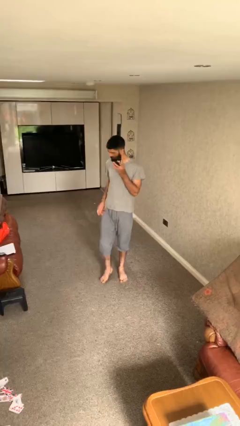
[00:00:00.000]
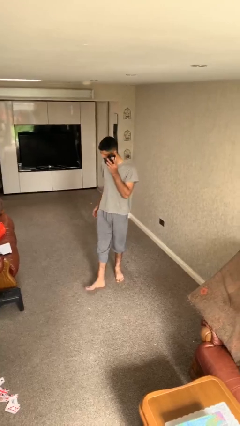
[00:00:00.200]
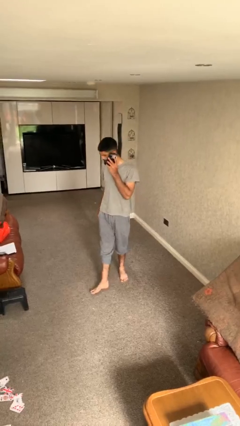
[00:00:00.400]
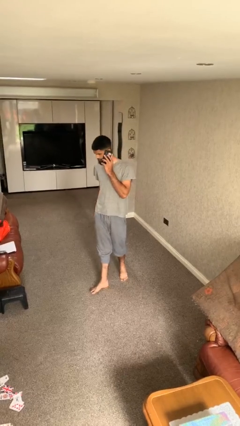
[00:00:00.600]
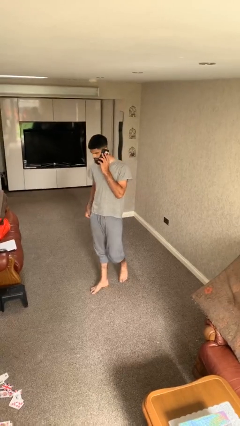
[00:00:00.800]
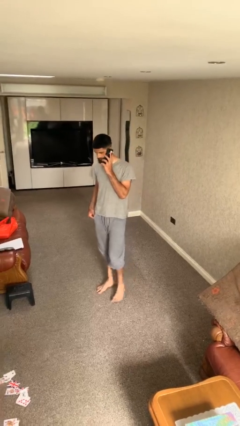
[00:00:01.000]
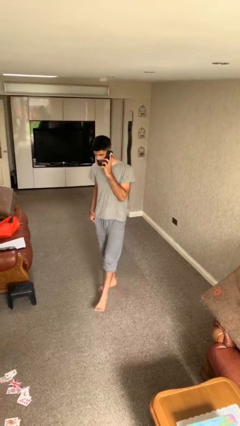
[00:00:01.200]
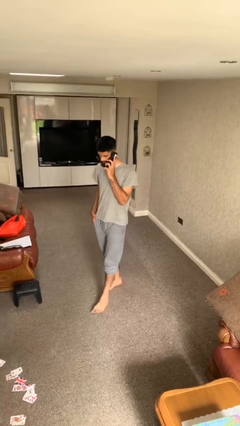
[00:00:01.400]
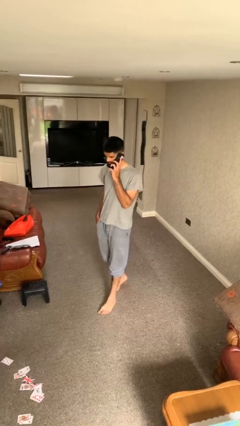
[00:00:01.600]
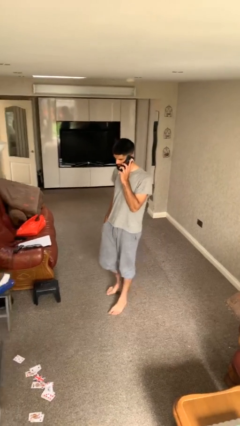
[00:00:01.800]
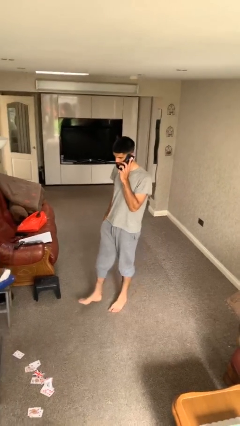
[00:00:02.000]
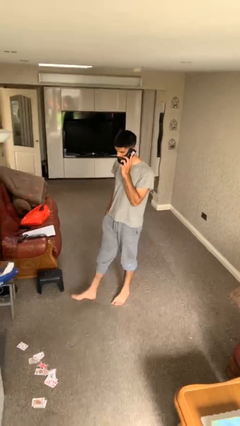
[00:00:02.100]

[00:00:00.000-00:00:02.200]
person talks on phone

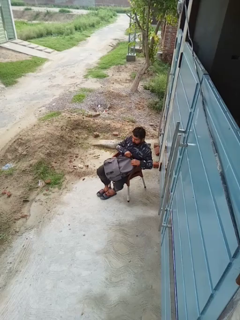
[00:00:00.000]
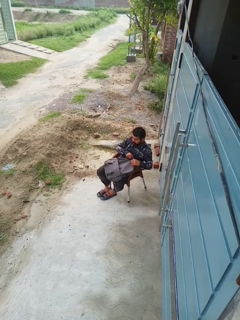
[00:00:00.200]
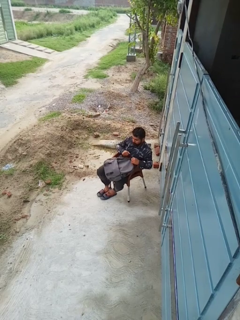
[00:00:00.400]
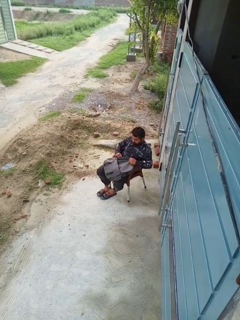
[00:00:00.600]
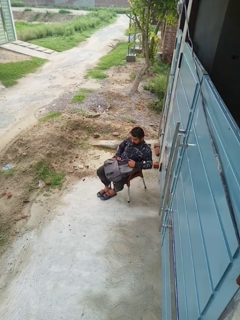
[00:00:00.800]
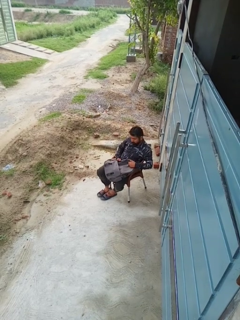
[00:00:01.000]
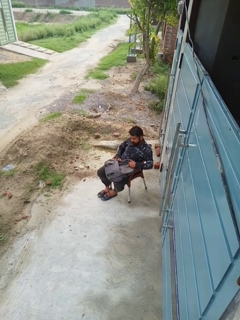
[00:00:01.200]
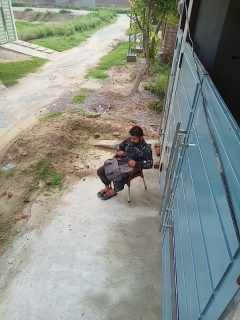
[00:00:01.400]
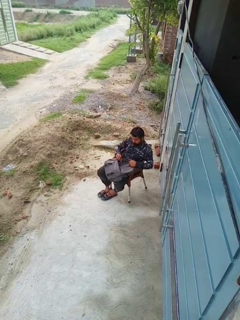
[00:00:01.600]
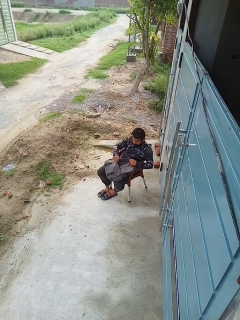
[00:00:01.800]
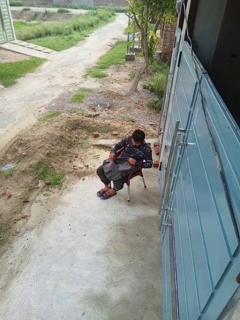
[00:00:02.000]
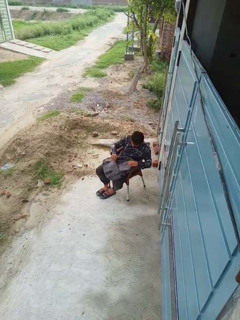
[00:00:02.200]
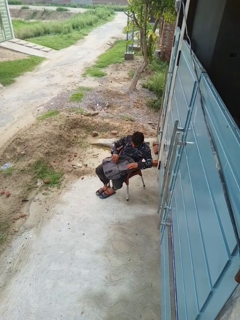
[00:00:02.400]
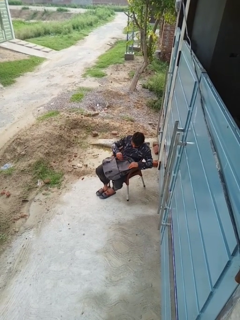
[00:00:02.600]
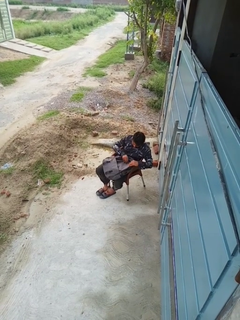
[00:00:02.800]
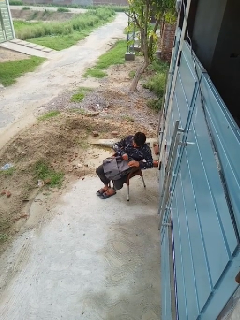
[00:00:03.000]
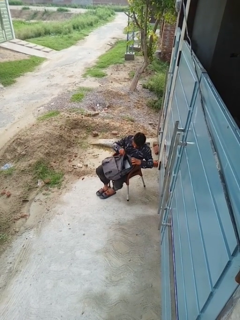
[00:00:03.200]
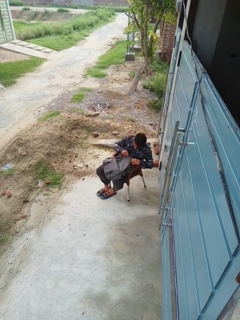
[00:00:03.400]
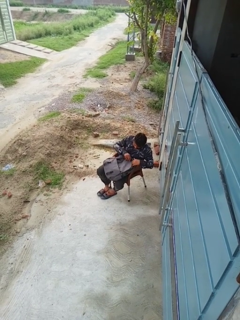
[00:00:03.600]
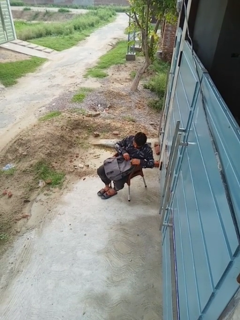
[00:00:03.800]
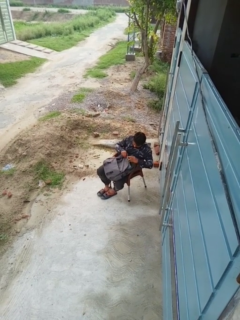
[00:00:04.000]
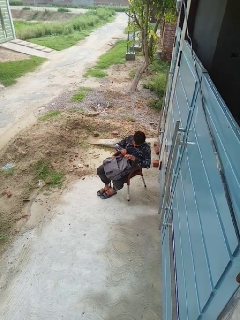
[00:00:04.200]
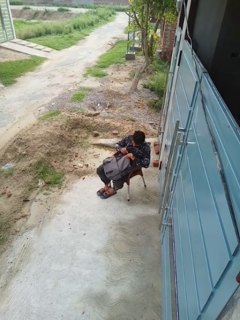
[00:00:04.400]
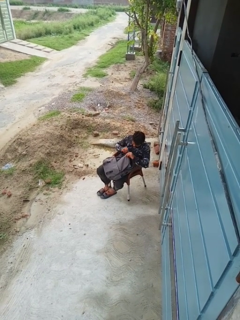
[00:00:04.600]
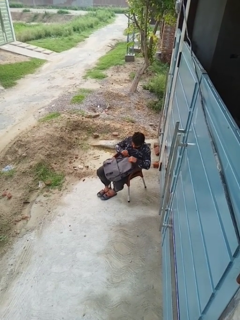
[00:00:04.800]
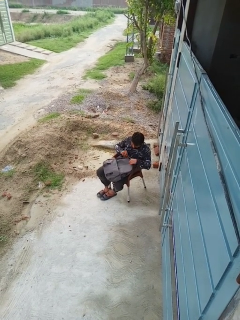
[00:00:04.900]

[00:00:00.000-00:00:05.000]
person searches in backpack

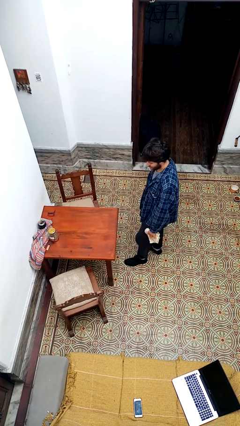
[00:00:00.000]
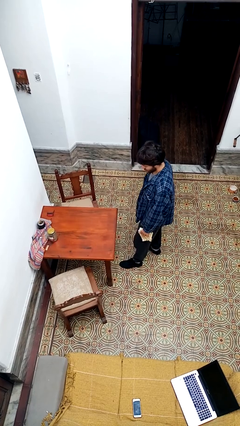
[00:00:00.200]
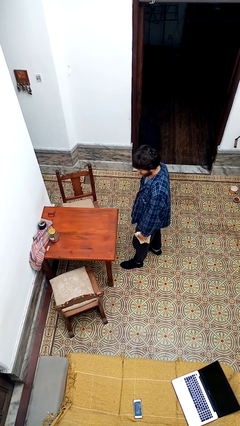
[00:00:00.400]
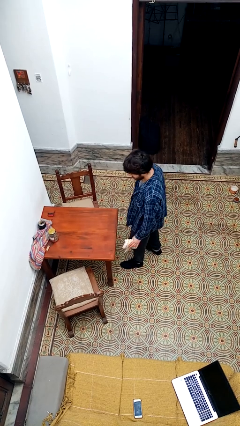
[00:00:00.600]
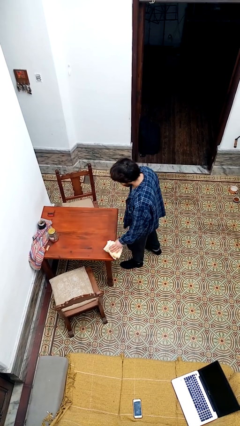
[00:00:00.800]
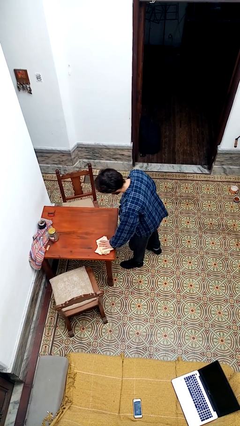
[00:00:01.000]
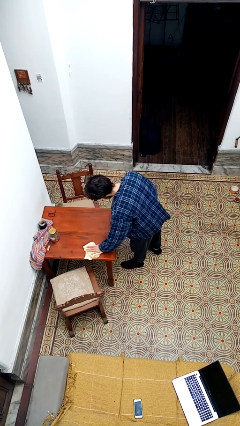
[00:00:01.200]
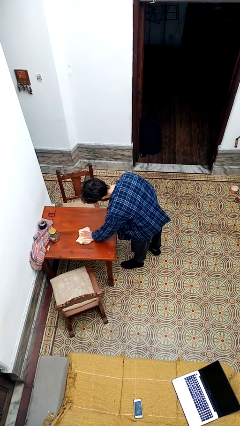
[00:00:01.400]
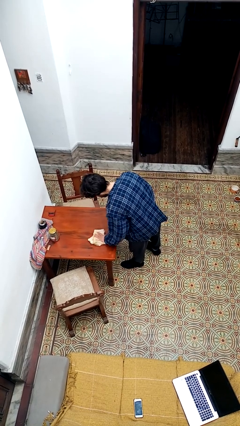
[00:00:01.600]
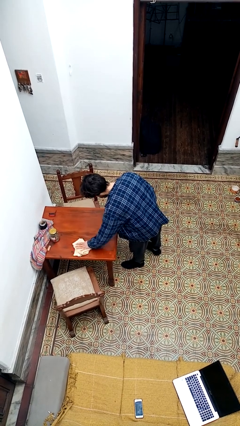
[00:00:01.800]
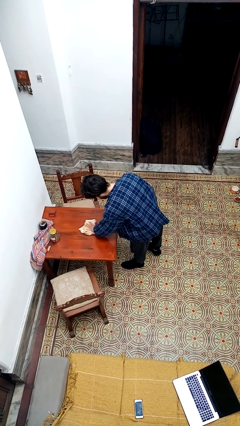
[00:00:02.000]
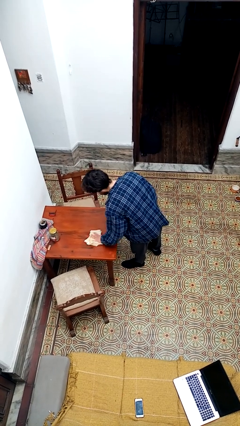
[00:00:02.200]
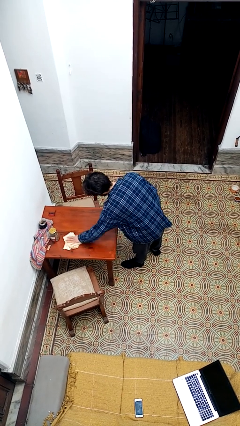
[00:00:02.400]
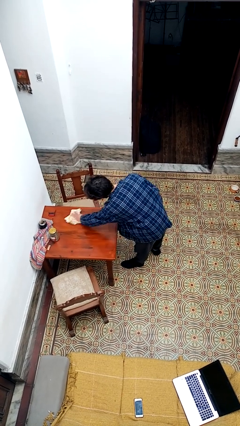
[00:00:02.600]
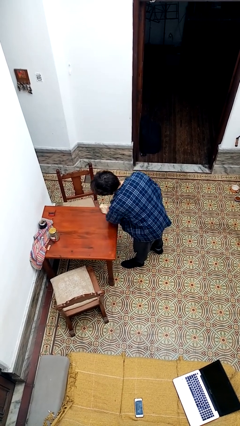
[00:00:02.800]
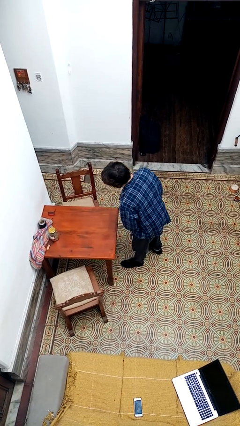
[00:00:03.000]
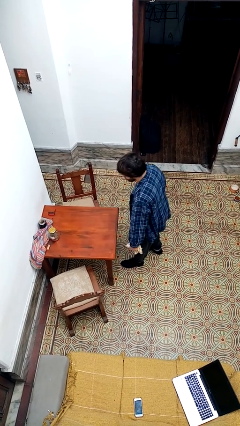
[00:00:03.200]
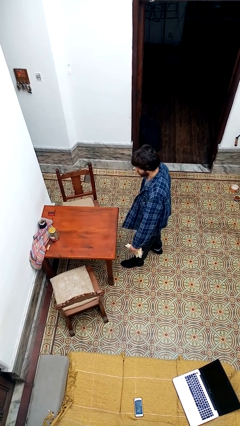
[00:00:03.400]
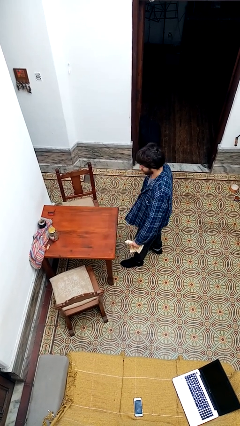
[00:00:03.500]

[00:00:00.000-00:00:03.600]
person cleans table with rag

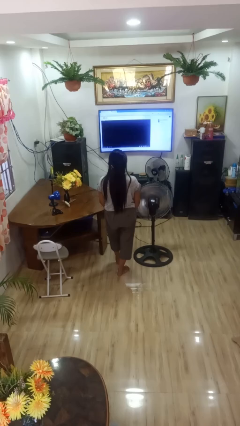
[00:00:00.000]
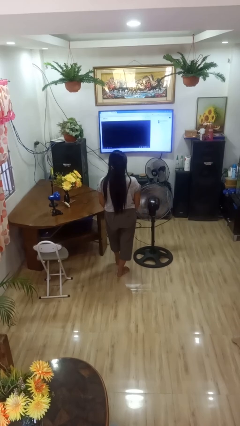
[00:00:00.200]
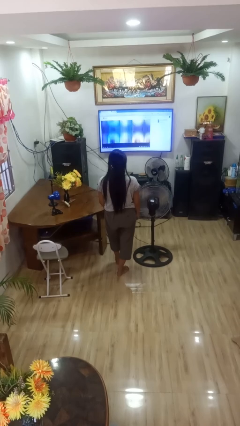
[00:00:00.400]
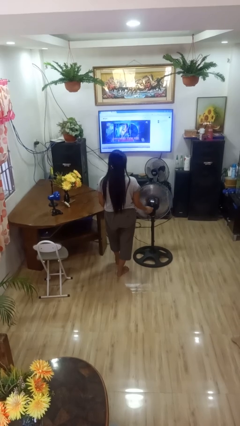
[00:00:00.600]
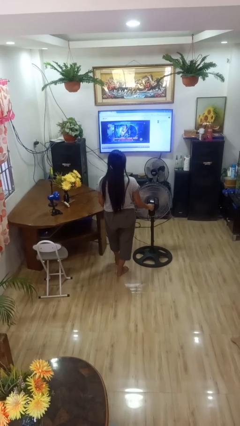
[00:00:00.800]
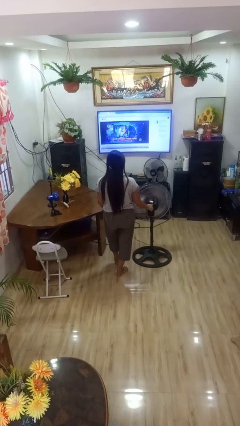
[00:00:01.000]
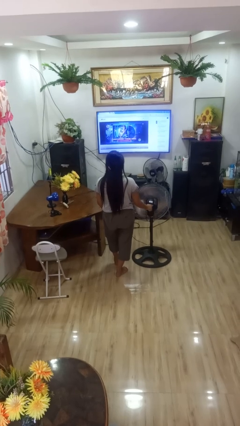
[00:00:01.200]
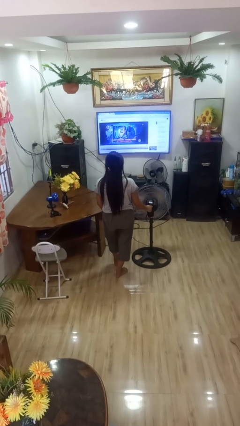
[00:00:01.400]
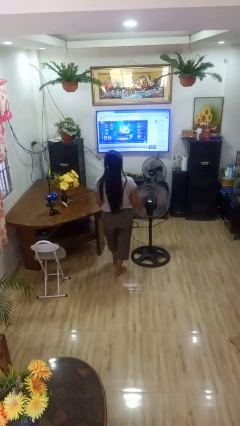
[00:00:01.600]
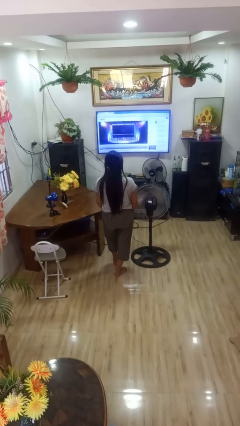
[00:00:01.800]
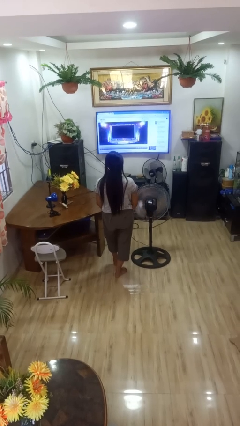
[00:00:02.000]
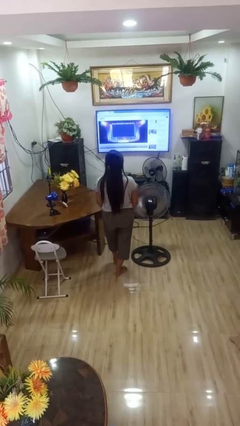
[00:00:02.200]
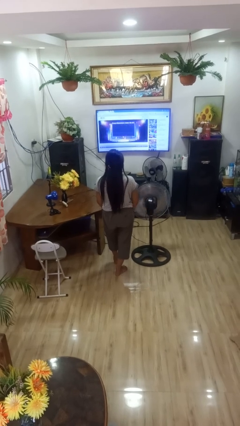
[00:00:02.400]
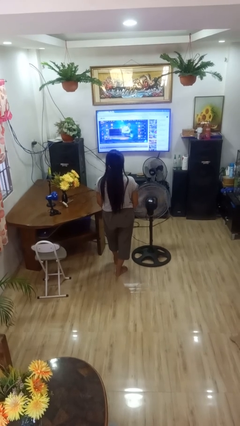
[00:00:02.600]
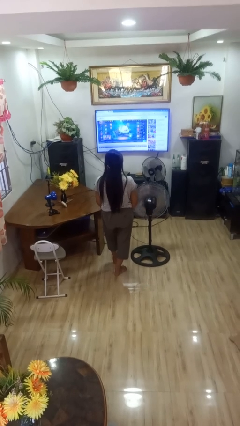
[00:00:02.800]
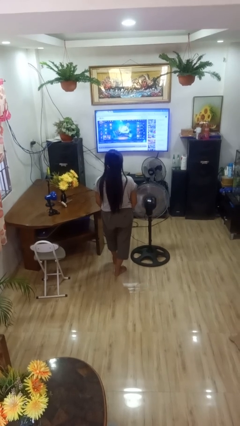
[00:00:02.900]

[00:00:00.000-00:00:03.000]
person turns on fan

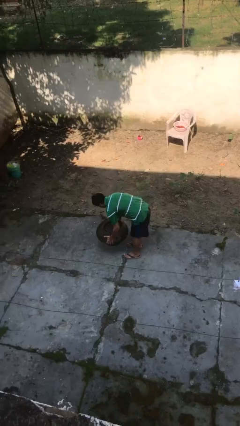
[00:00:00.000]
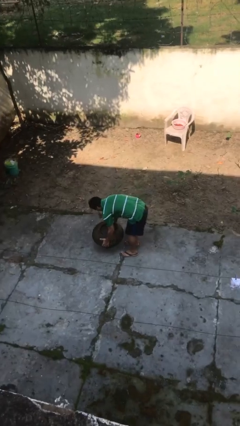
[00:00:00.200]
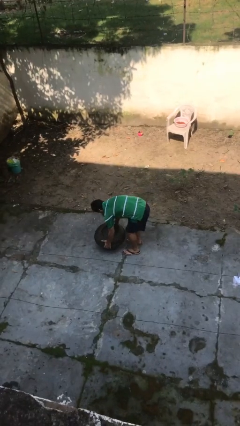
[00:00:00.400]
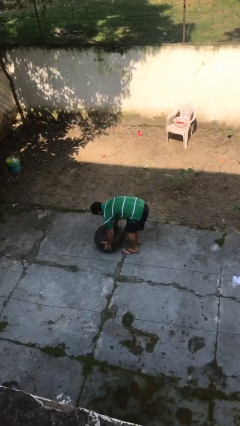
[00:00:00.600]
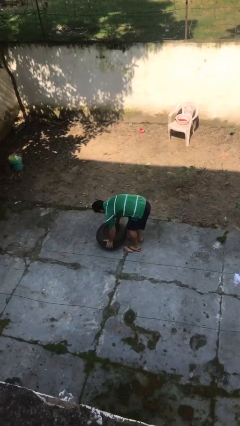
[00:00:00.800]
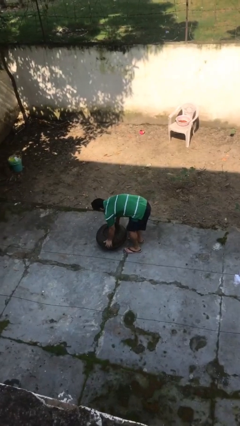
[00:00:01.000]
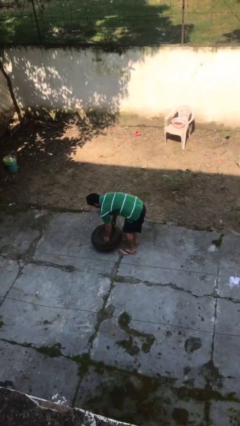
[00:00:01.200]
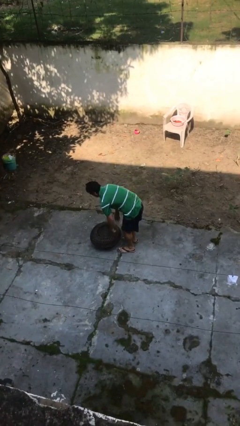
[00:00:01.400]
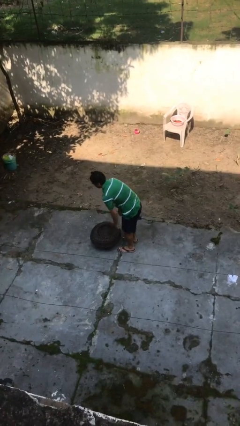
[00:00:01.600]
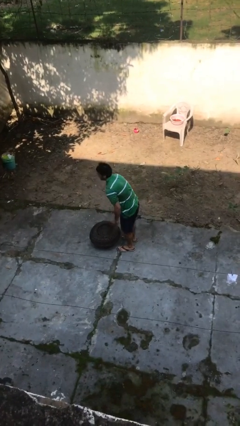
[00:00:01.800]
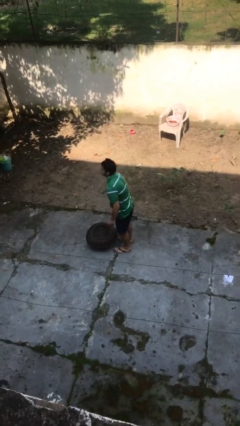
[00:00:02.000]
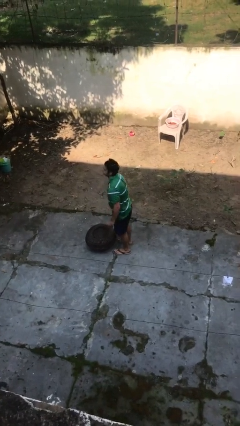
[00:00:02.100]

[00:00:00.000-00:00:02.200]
person puts down object on floor

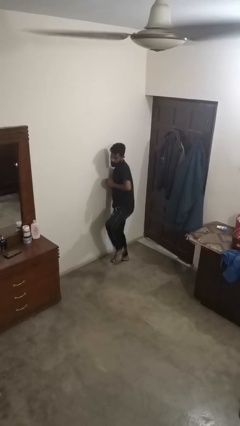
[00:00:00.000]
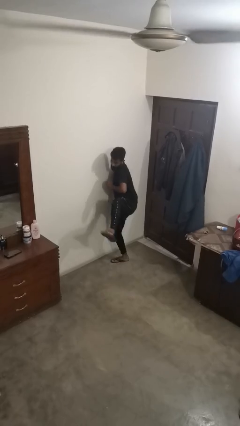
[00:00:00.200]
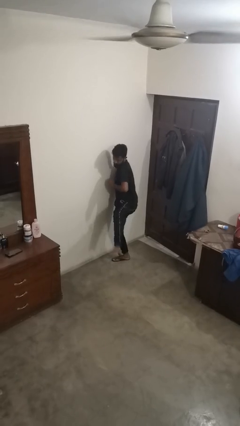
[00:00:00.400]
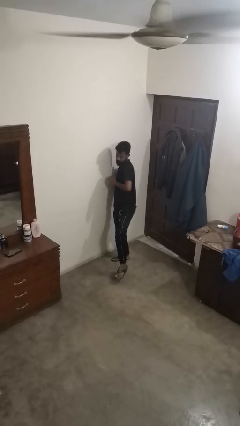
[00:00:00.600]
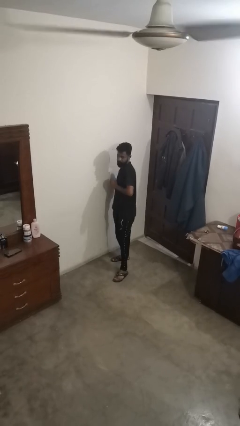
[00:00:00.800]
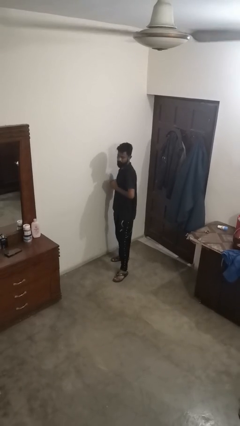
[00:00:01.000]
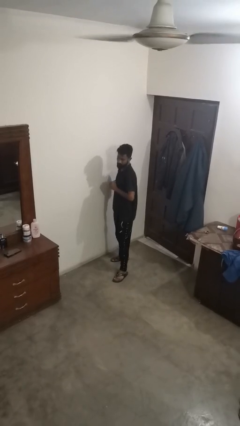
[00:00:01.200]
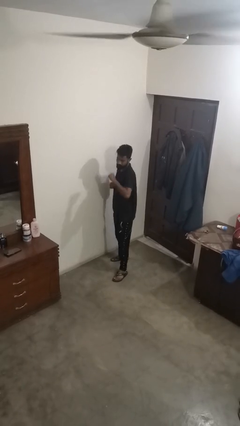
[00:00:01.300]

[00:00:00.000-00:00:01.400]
person karate kicks

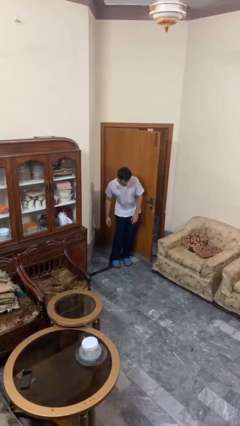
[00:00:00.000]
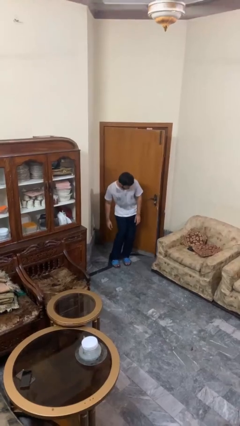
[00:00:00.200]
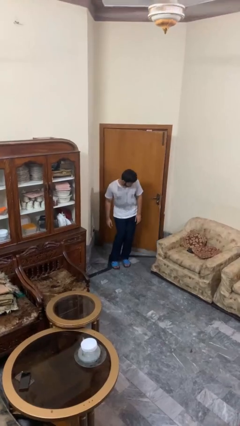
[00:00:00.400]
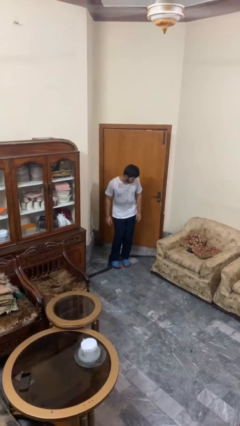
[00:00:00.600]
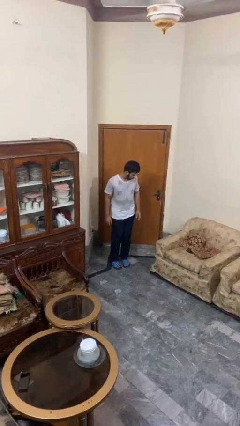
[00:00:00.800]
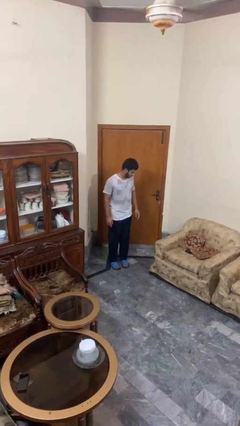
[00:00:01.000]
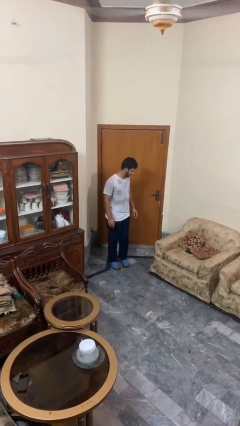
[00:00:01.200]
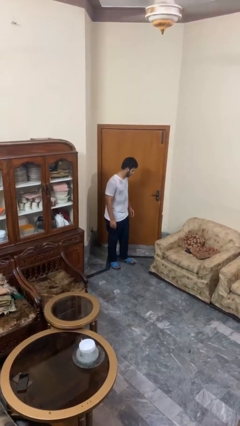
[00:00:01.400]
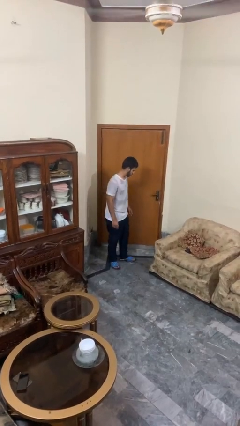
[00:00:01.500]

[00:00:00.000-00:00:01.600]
person closes door with hip
